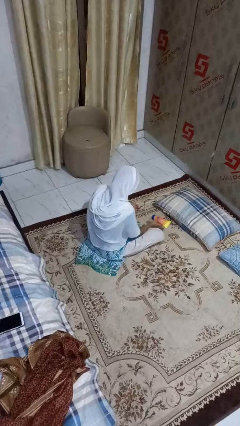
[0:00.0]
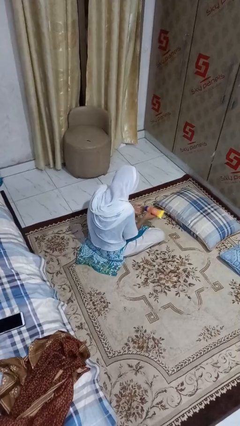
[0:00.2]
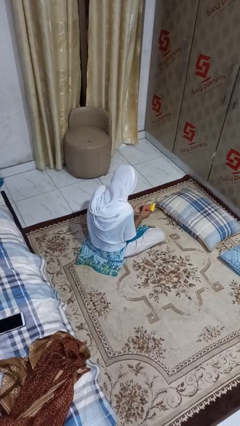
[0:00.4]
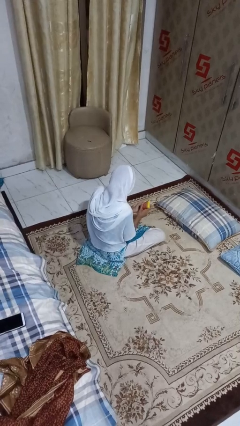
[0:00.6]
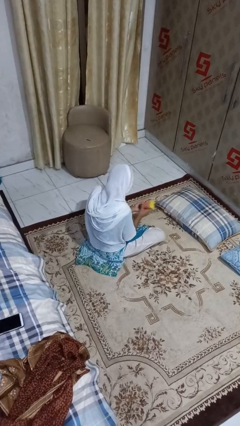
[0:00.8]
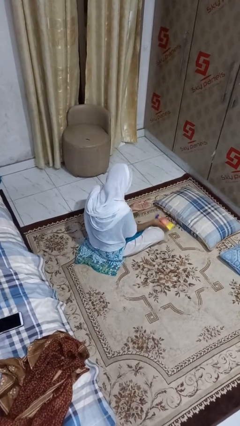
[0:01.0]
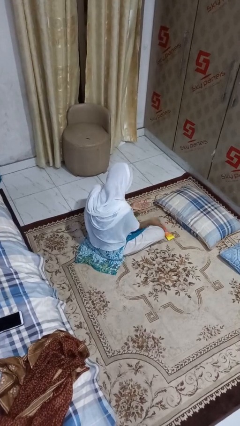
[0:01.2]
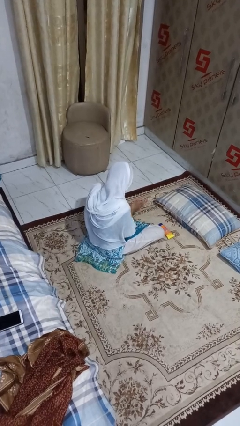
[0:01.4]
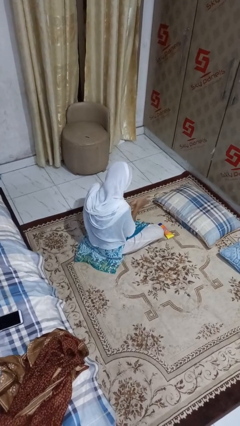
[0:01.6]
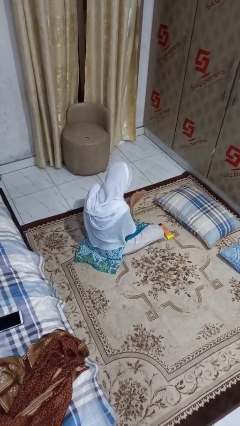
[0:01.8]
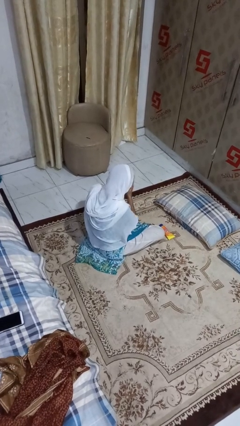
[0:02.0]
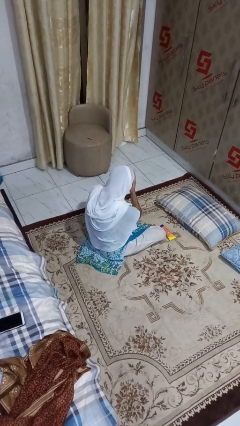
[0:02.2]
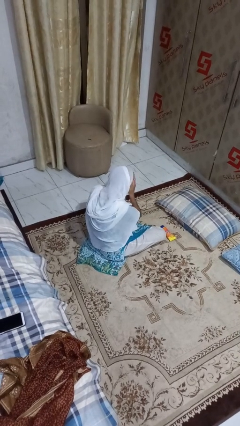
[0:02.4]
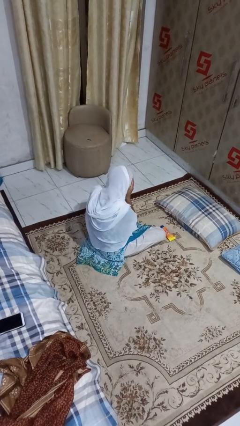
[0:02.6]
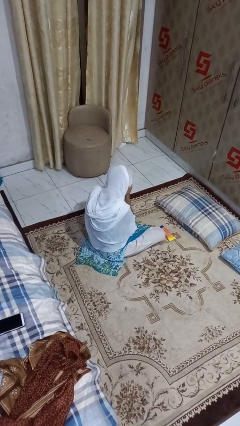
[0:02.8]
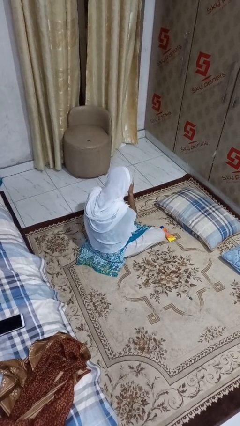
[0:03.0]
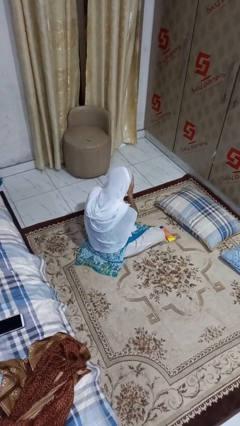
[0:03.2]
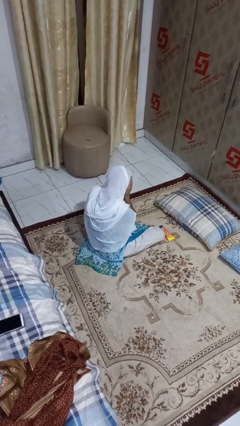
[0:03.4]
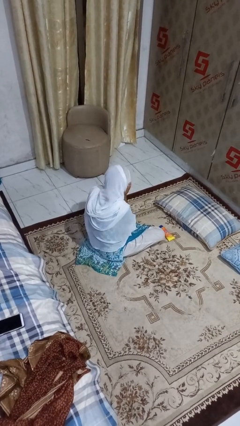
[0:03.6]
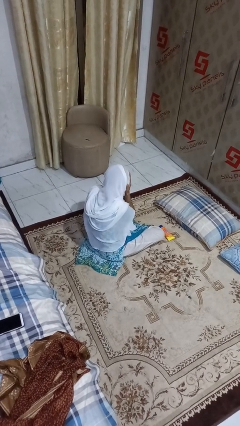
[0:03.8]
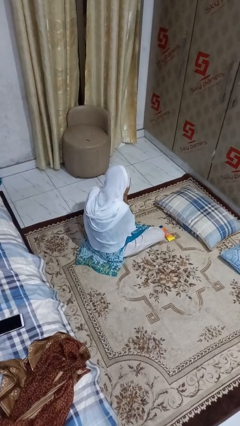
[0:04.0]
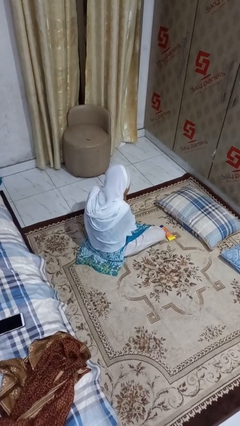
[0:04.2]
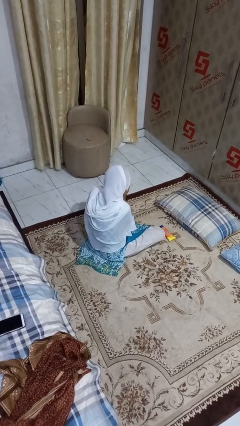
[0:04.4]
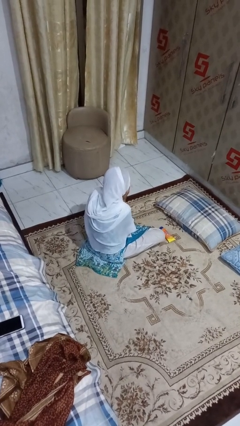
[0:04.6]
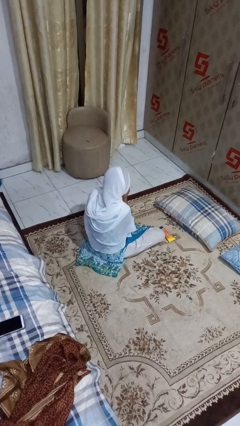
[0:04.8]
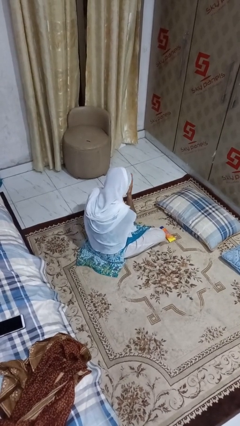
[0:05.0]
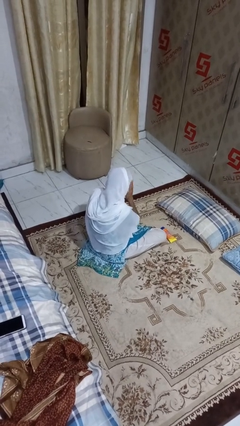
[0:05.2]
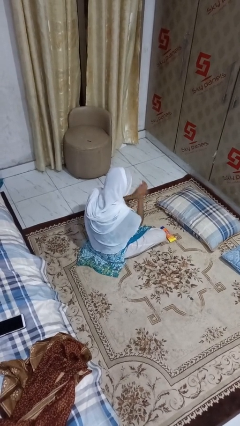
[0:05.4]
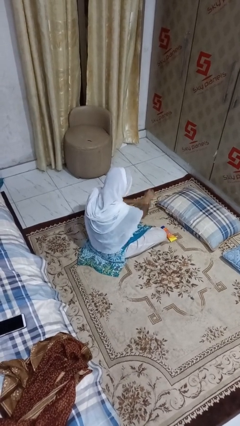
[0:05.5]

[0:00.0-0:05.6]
person applies sunscreen

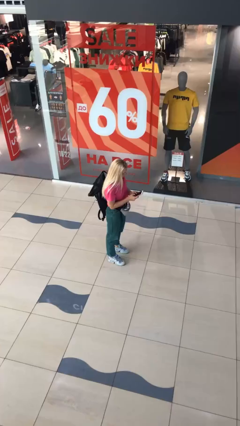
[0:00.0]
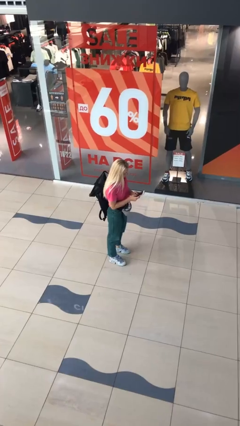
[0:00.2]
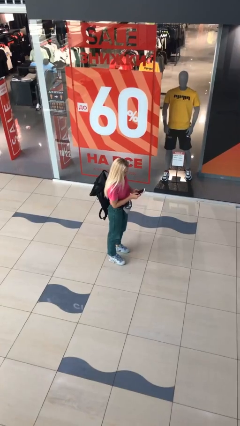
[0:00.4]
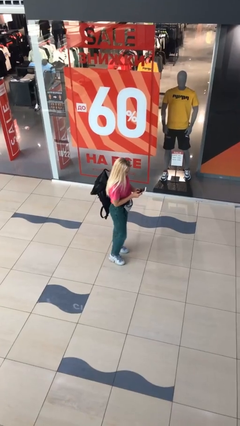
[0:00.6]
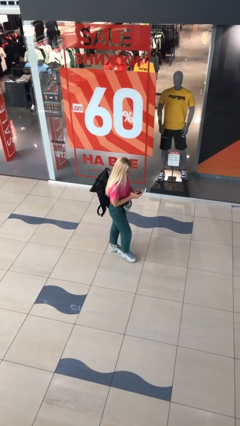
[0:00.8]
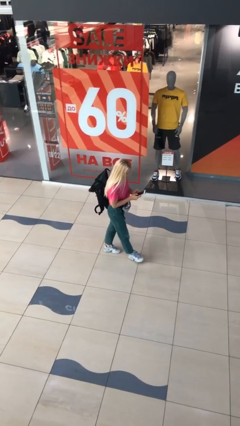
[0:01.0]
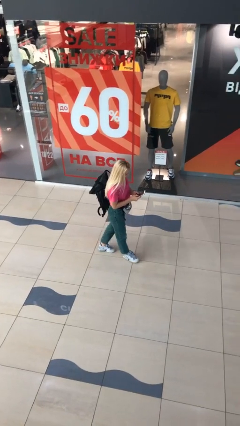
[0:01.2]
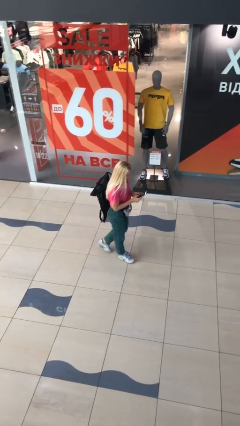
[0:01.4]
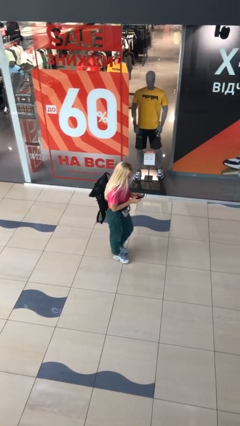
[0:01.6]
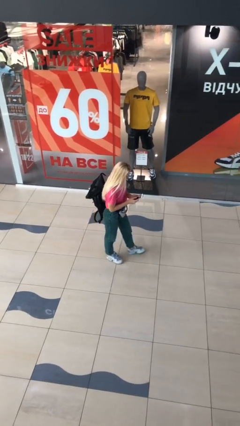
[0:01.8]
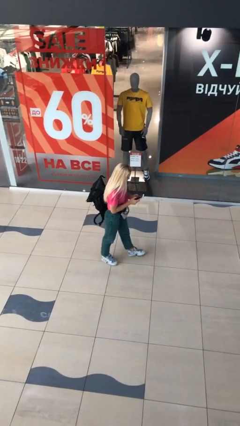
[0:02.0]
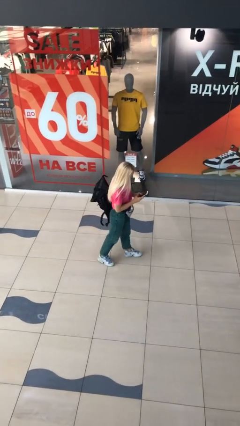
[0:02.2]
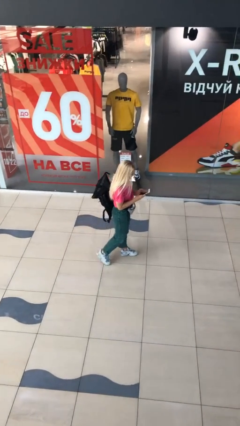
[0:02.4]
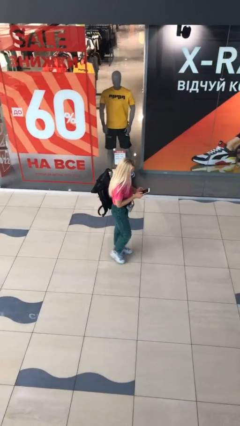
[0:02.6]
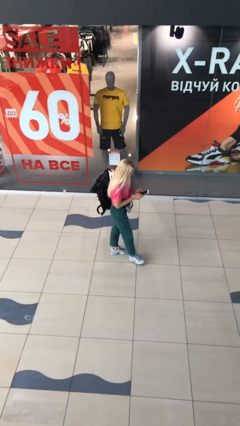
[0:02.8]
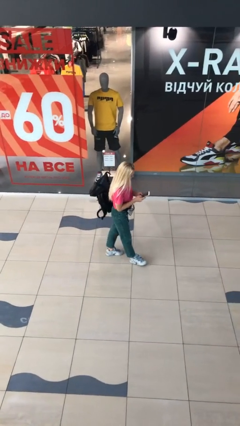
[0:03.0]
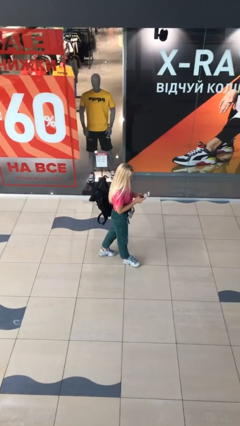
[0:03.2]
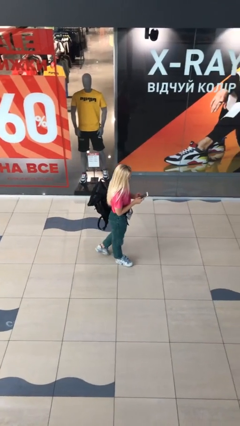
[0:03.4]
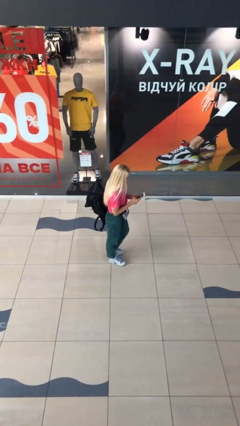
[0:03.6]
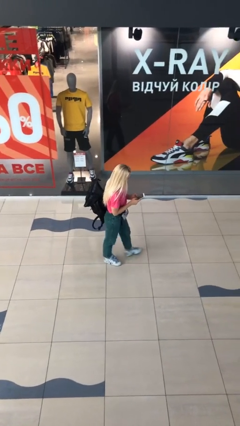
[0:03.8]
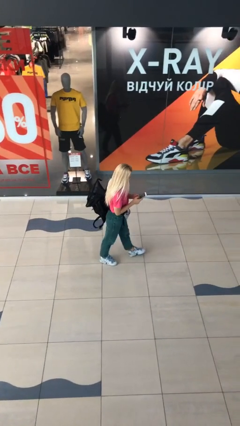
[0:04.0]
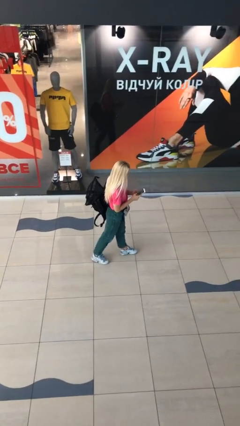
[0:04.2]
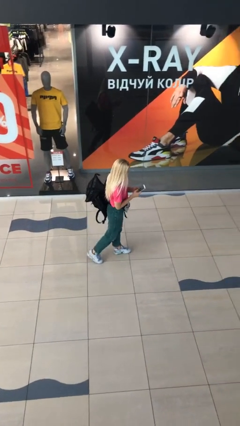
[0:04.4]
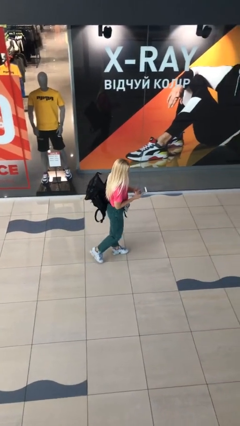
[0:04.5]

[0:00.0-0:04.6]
person texts on phone

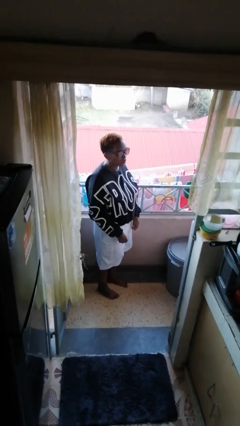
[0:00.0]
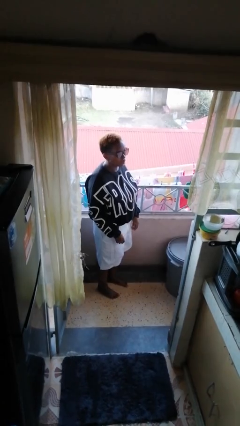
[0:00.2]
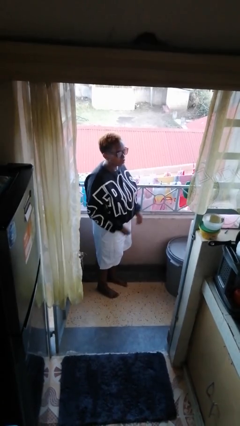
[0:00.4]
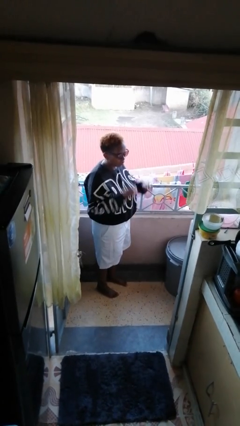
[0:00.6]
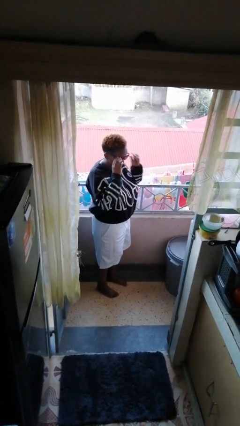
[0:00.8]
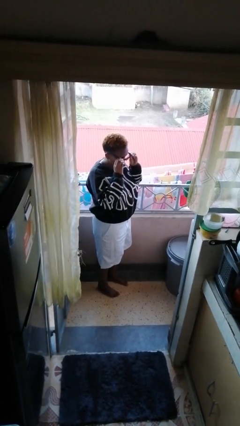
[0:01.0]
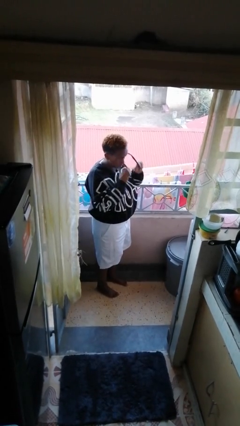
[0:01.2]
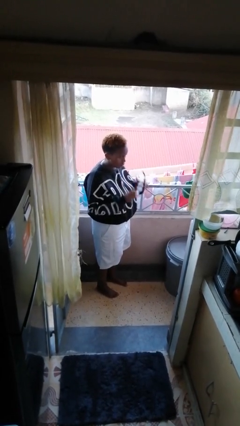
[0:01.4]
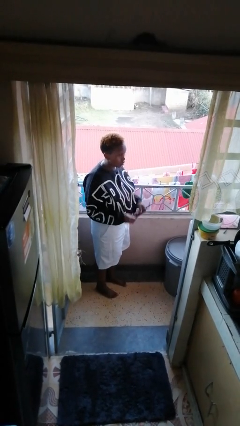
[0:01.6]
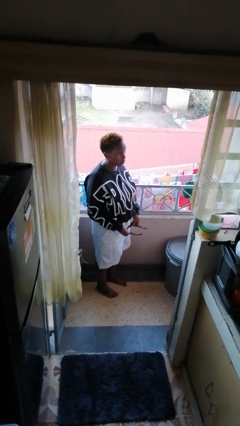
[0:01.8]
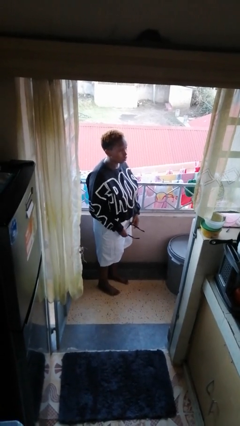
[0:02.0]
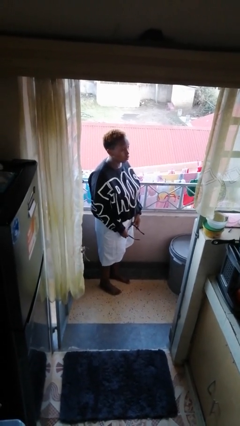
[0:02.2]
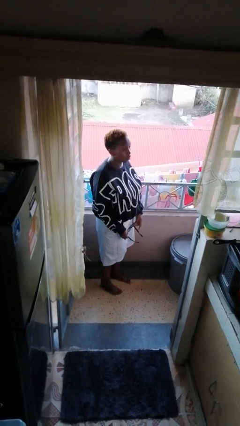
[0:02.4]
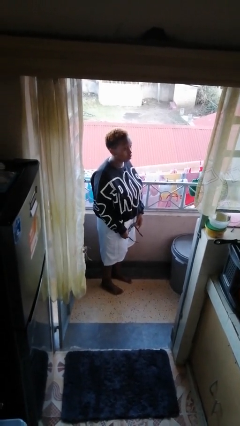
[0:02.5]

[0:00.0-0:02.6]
person takes off sunglasses

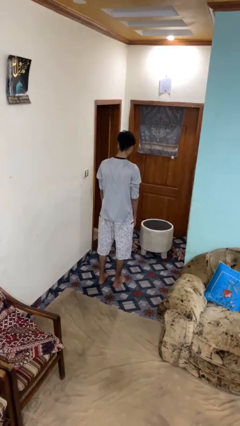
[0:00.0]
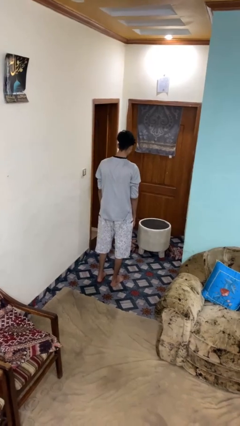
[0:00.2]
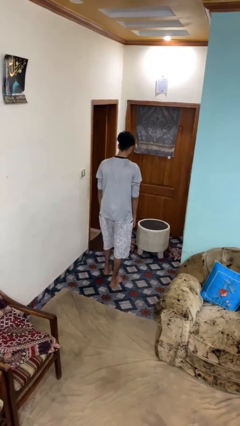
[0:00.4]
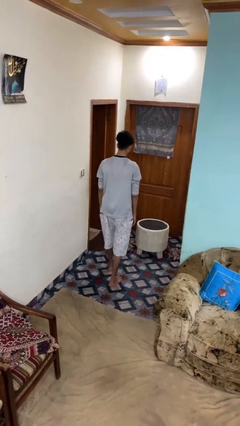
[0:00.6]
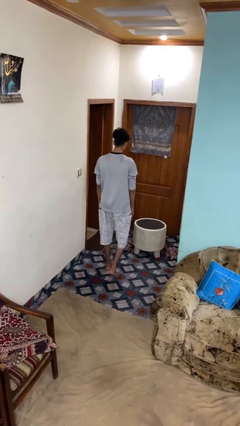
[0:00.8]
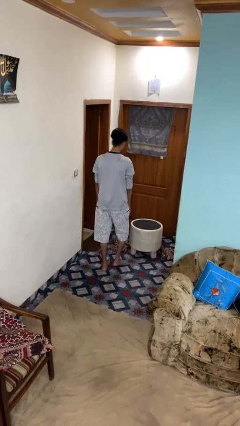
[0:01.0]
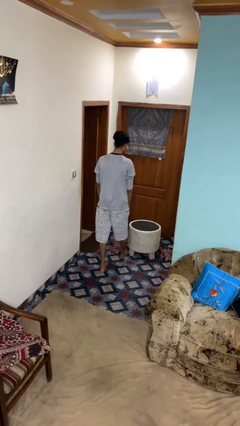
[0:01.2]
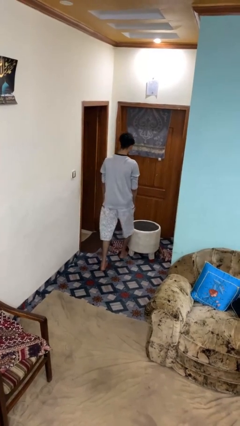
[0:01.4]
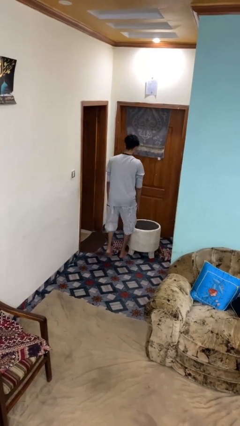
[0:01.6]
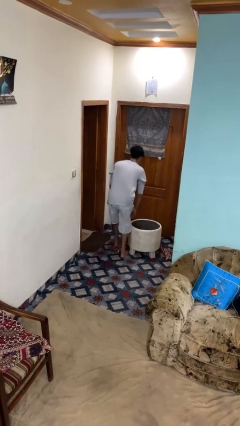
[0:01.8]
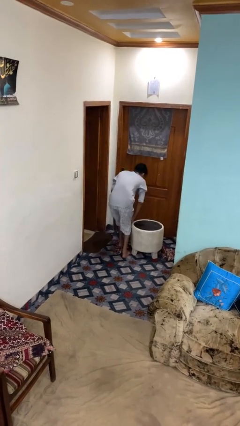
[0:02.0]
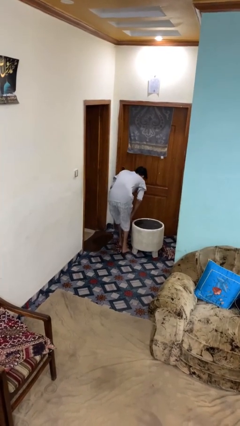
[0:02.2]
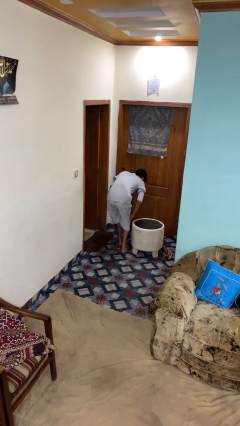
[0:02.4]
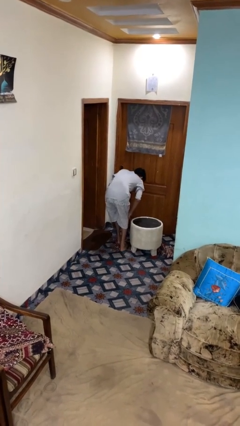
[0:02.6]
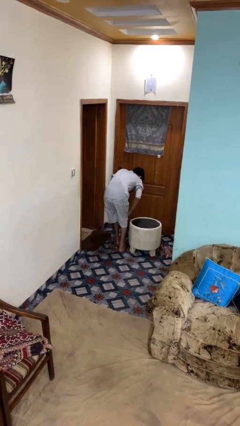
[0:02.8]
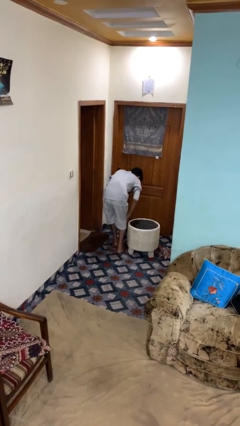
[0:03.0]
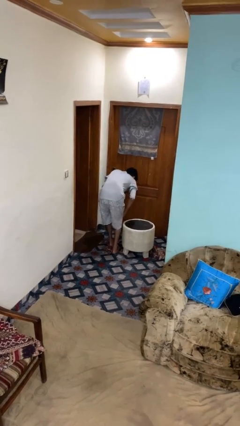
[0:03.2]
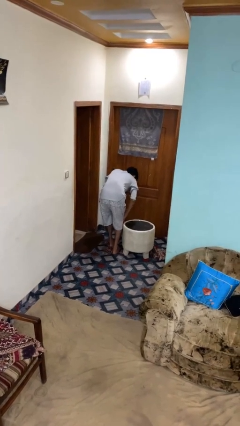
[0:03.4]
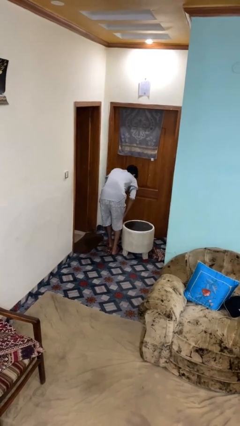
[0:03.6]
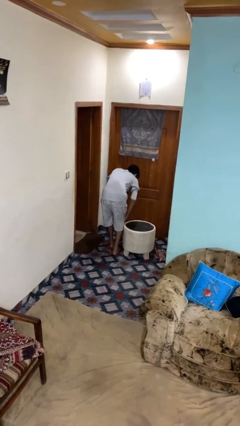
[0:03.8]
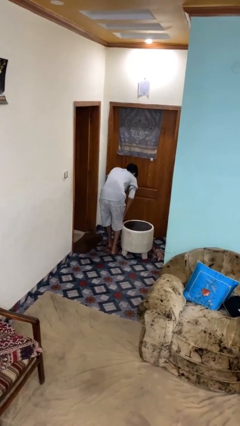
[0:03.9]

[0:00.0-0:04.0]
person bumps into table

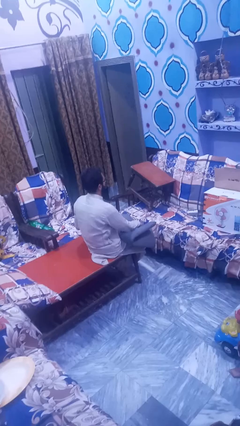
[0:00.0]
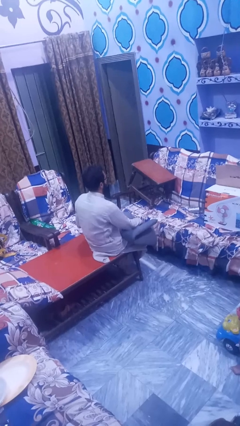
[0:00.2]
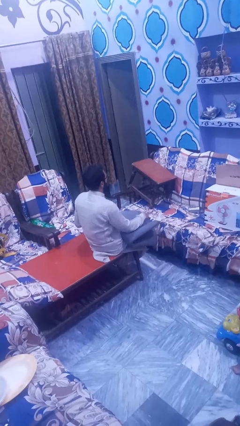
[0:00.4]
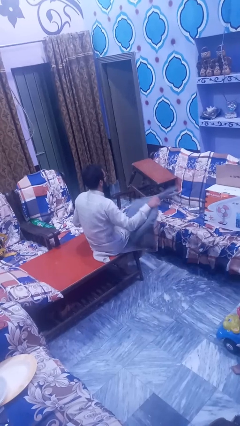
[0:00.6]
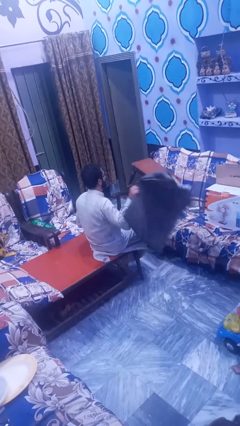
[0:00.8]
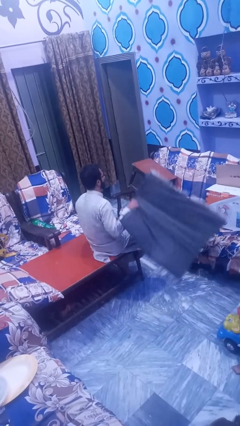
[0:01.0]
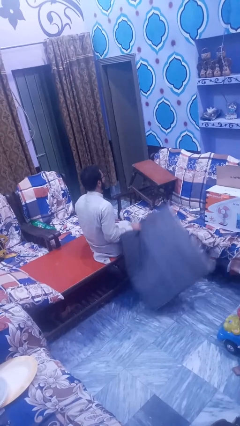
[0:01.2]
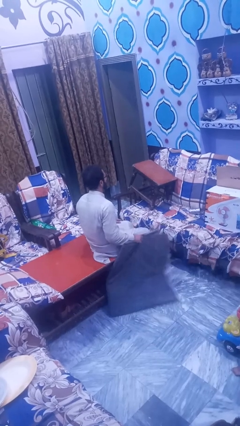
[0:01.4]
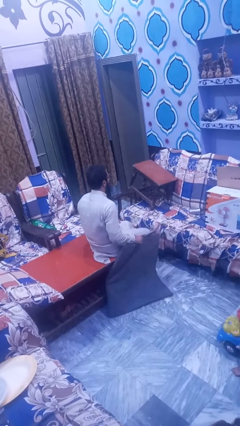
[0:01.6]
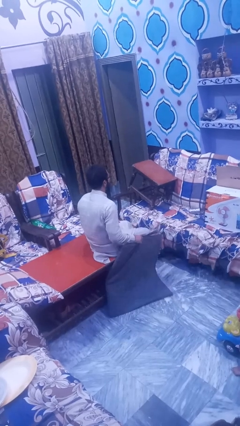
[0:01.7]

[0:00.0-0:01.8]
person unfolds blanket
